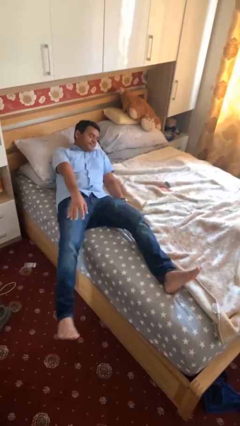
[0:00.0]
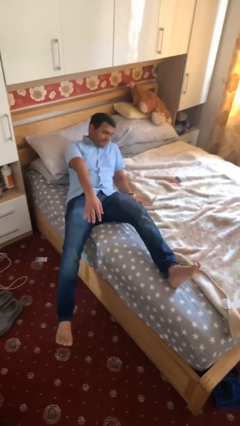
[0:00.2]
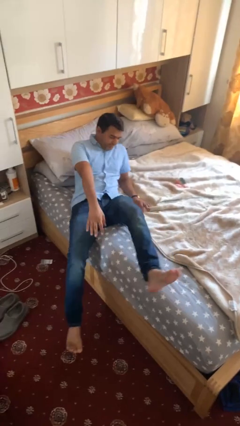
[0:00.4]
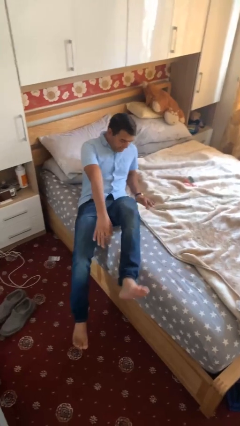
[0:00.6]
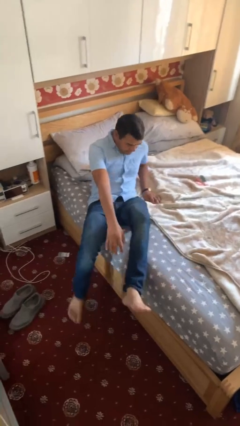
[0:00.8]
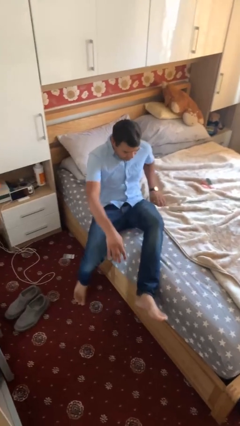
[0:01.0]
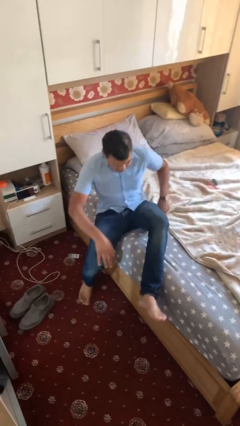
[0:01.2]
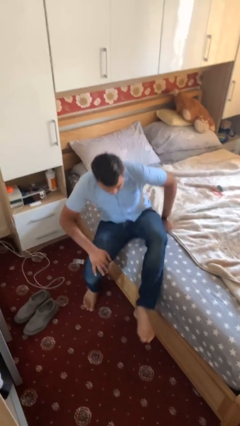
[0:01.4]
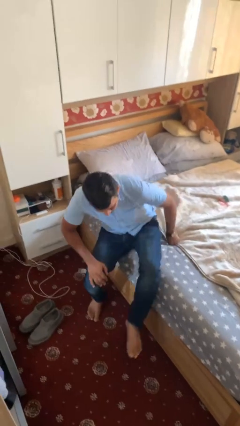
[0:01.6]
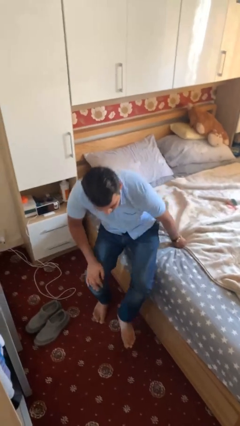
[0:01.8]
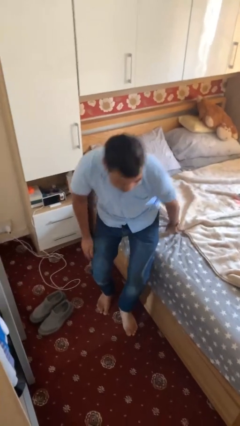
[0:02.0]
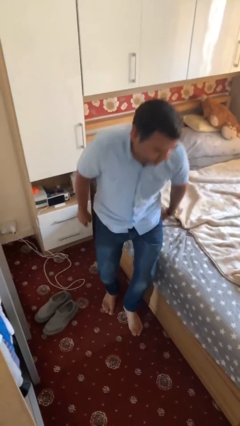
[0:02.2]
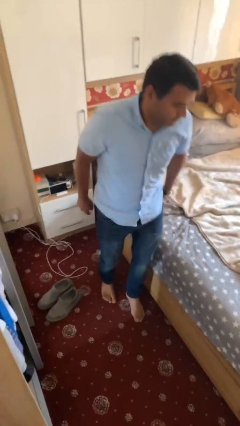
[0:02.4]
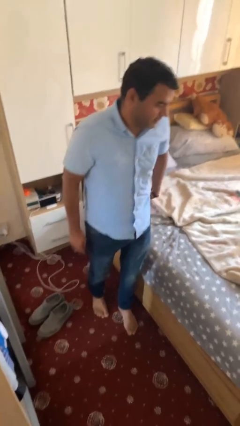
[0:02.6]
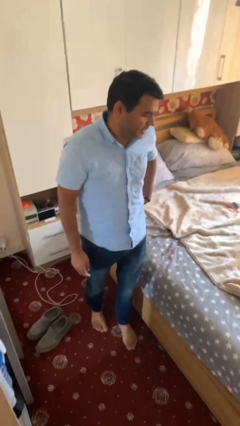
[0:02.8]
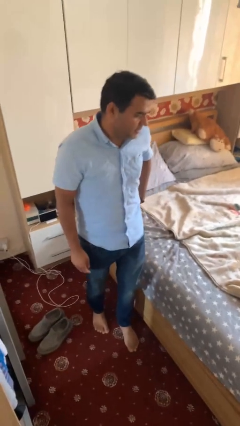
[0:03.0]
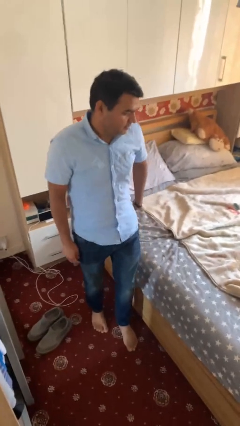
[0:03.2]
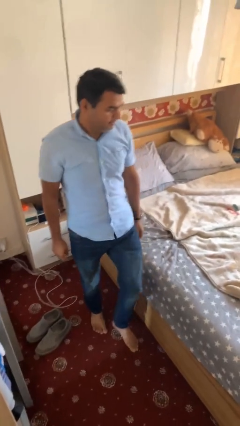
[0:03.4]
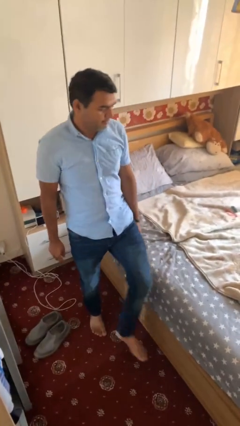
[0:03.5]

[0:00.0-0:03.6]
person stands up

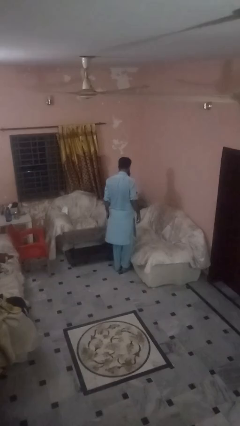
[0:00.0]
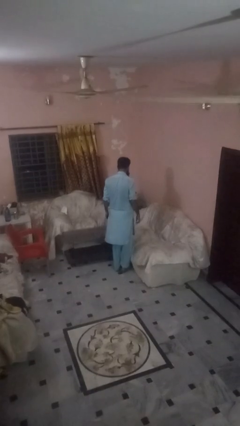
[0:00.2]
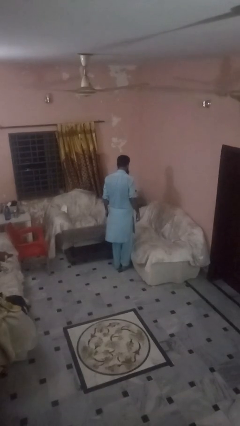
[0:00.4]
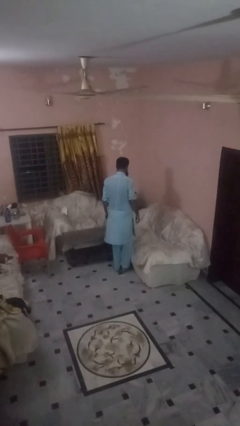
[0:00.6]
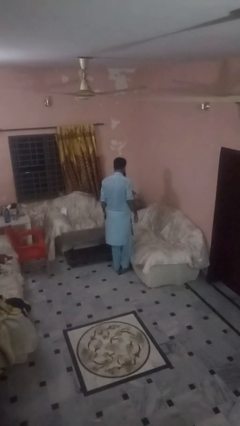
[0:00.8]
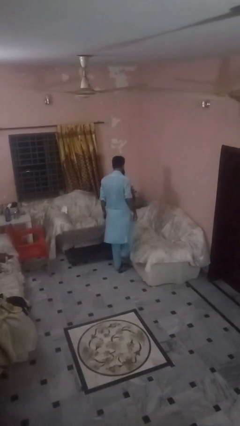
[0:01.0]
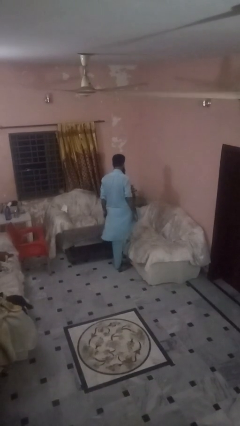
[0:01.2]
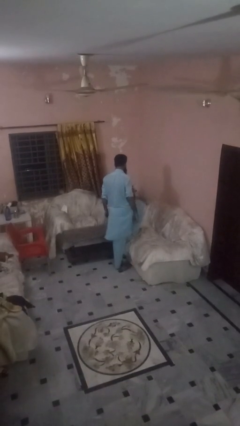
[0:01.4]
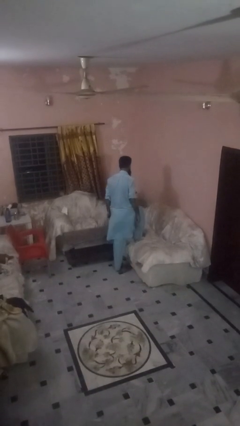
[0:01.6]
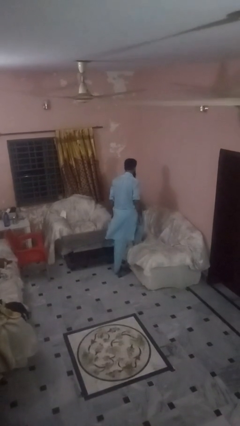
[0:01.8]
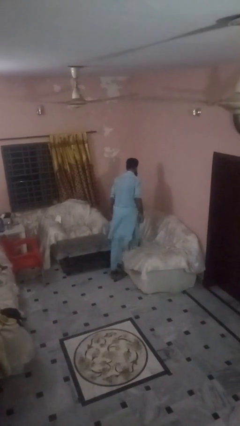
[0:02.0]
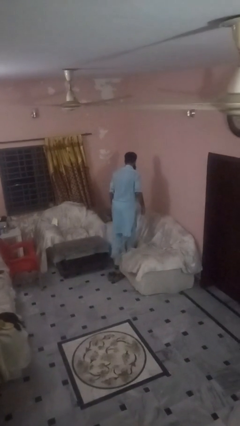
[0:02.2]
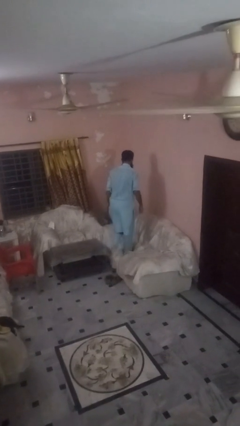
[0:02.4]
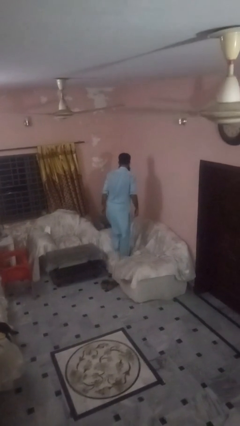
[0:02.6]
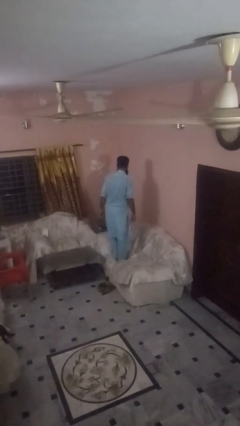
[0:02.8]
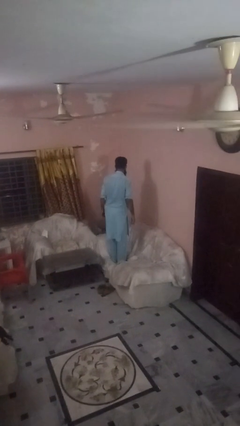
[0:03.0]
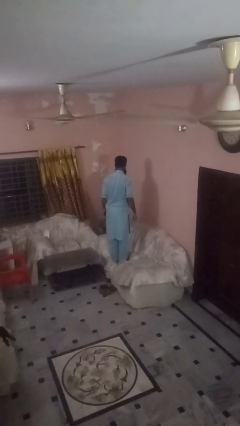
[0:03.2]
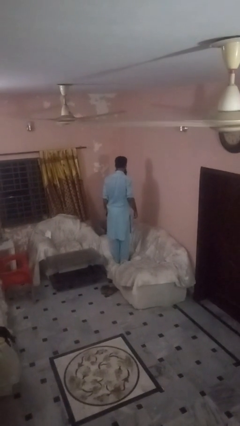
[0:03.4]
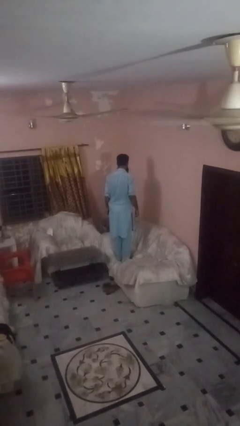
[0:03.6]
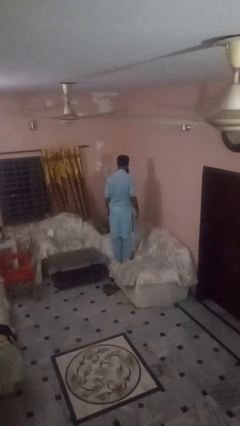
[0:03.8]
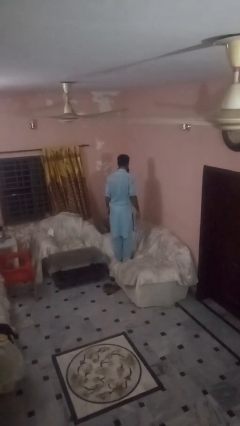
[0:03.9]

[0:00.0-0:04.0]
person climbs on couch

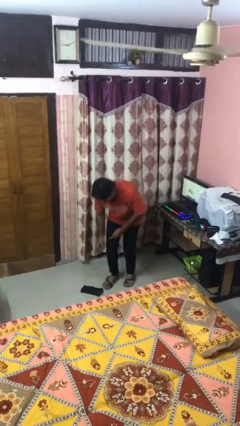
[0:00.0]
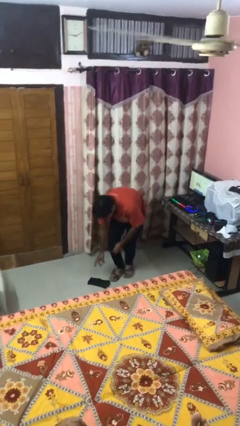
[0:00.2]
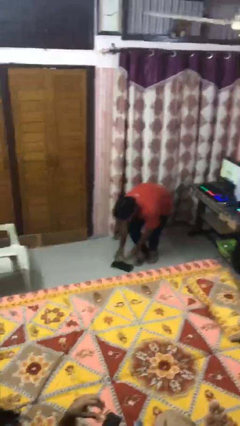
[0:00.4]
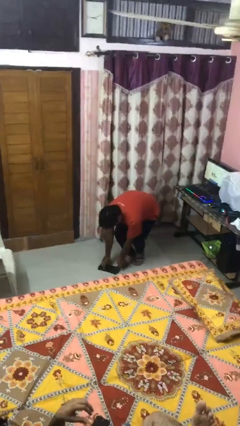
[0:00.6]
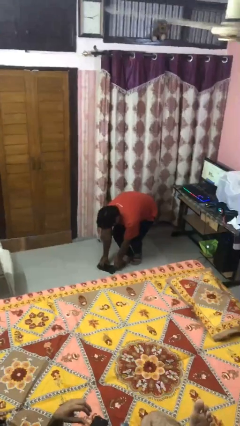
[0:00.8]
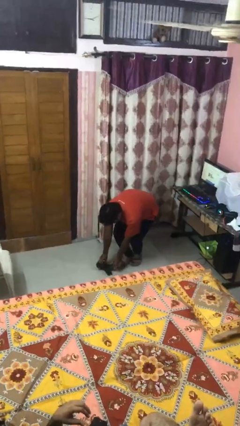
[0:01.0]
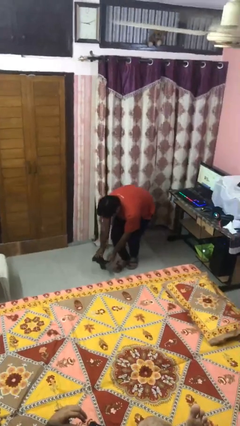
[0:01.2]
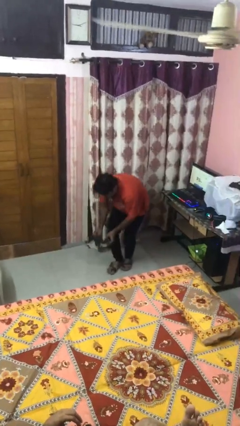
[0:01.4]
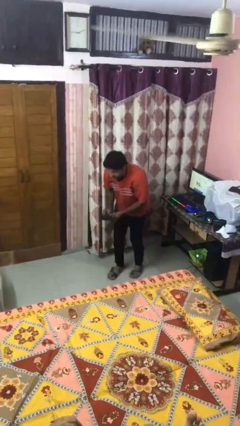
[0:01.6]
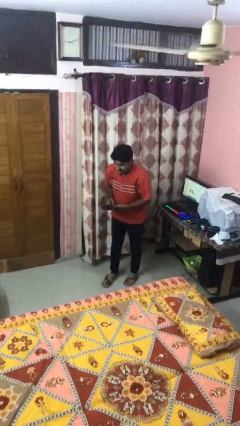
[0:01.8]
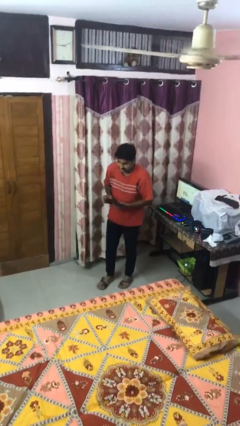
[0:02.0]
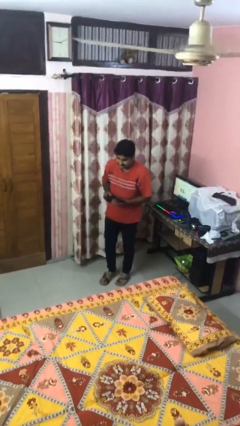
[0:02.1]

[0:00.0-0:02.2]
person picks up object from floor

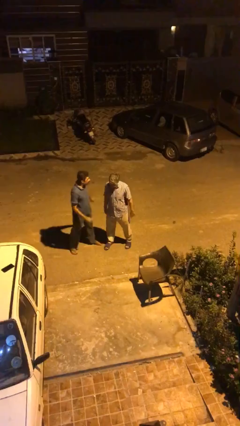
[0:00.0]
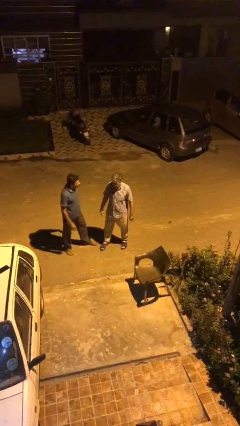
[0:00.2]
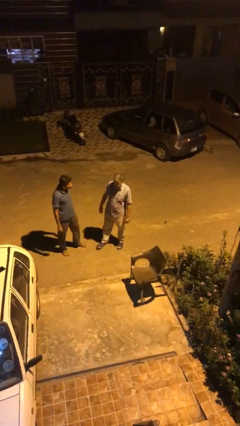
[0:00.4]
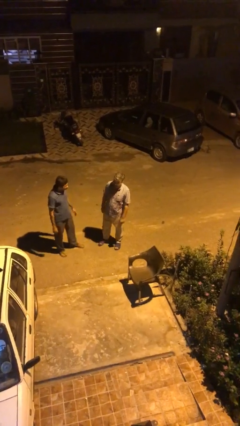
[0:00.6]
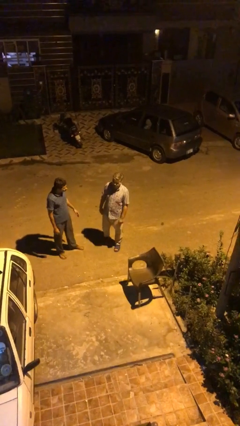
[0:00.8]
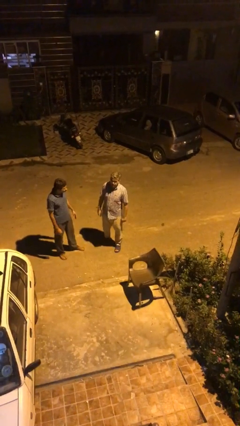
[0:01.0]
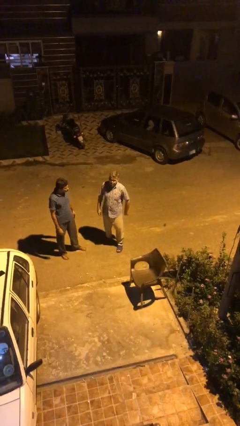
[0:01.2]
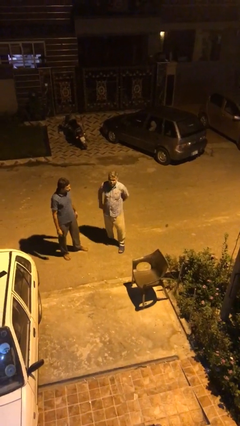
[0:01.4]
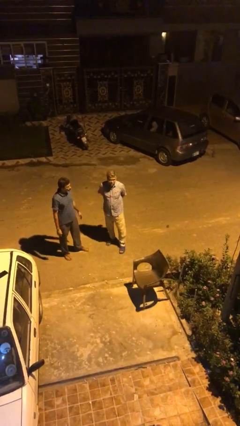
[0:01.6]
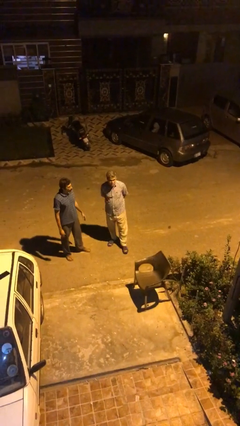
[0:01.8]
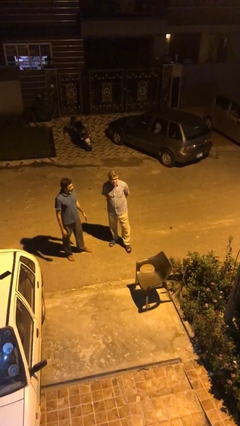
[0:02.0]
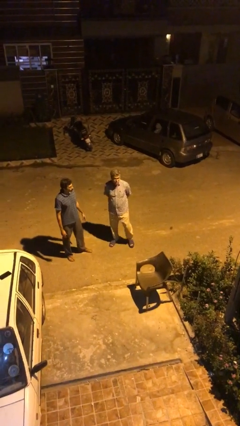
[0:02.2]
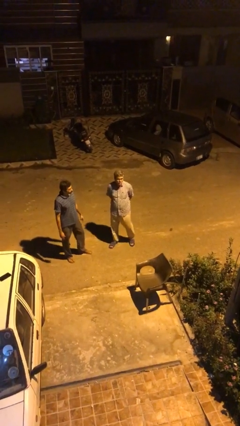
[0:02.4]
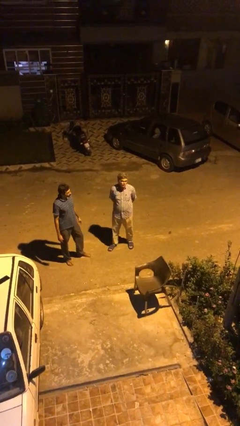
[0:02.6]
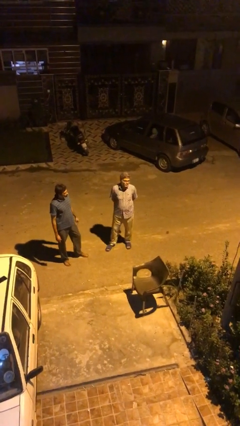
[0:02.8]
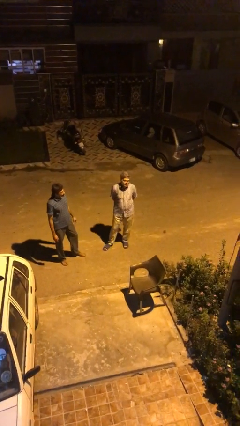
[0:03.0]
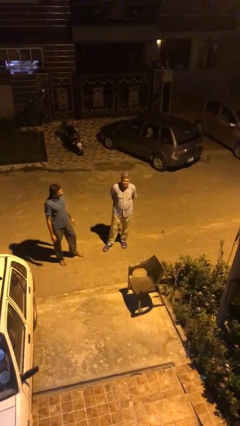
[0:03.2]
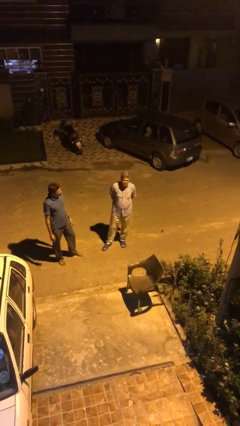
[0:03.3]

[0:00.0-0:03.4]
person talks to person

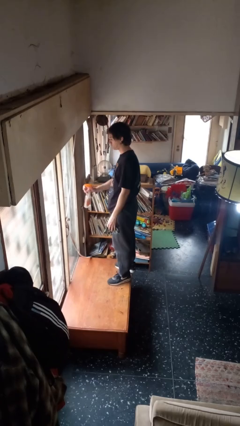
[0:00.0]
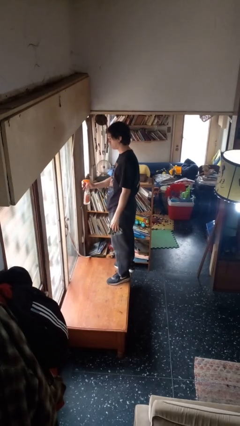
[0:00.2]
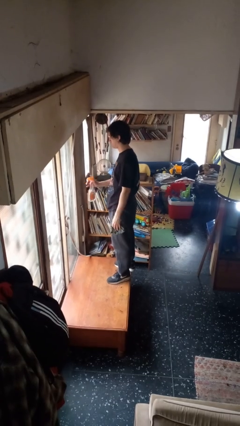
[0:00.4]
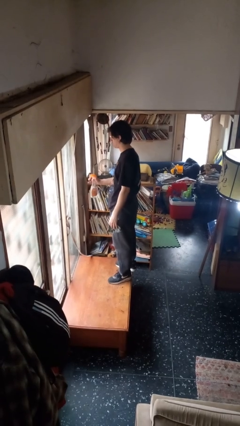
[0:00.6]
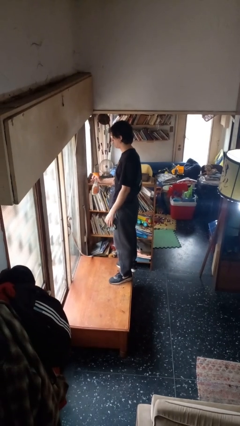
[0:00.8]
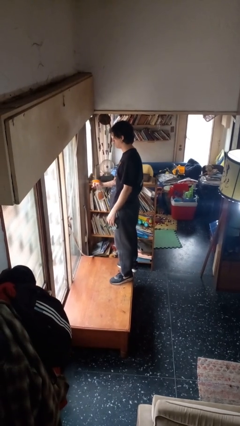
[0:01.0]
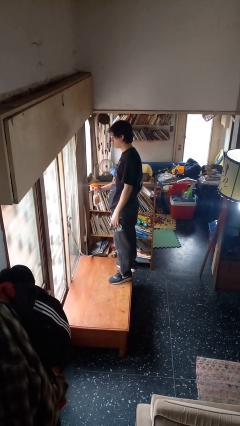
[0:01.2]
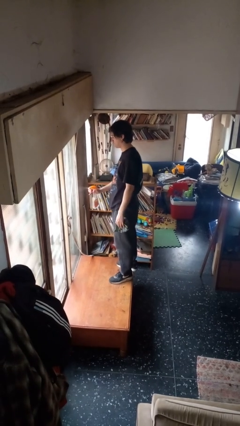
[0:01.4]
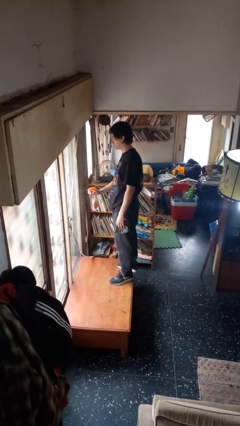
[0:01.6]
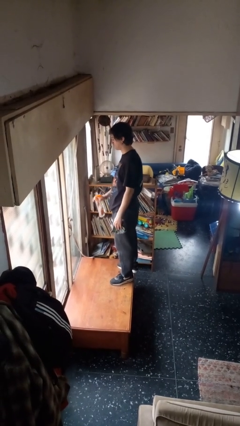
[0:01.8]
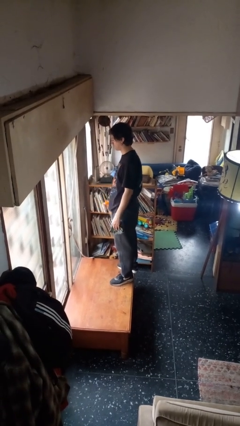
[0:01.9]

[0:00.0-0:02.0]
person sprays from bottle

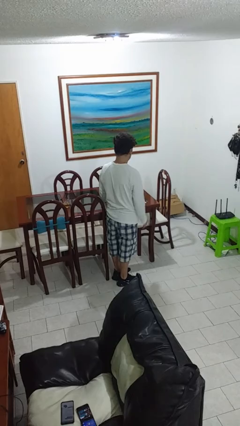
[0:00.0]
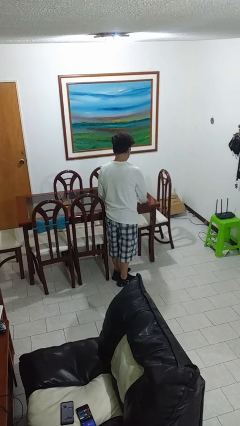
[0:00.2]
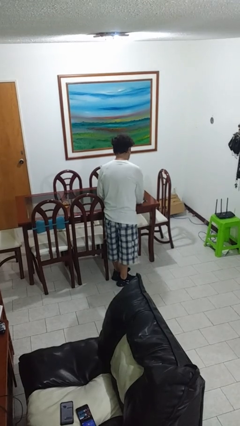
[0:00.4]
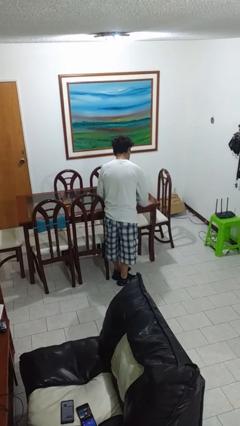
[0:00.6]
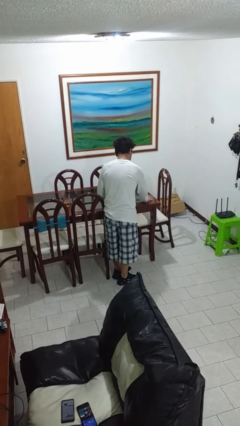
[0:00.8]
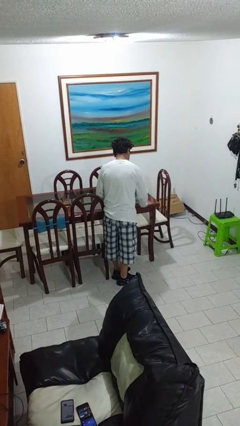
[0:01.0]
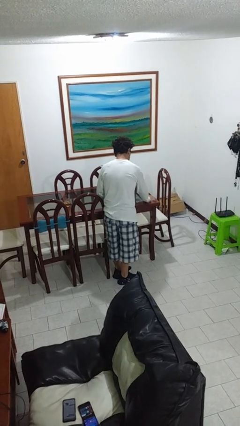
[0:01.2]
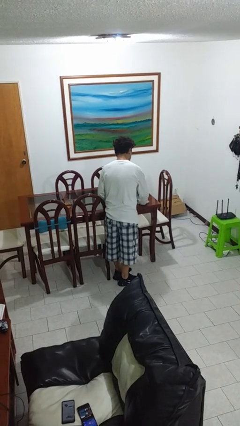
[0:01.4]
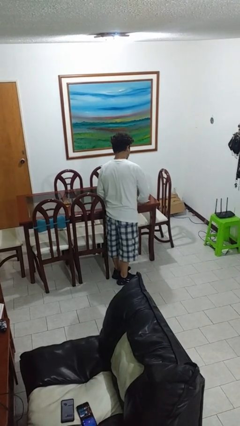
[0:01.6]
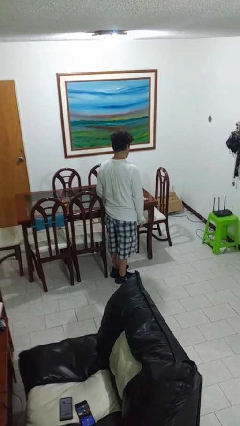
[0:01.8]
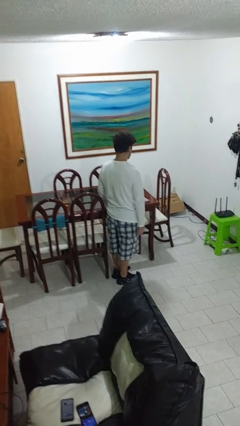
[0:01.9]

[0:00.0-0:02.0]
person cleans table with rag
